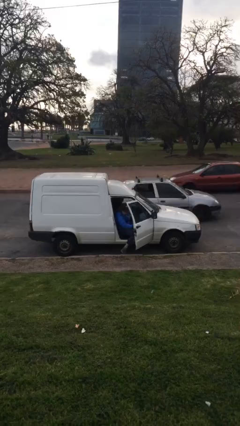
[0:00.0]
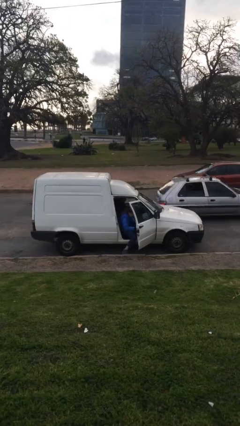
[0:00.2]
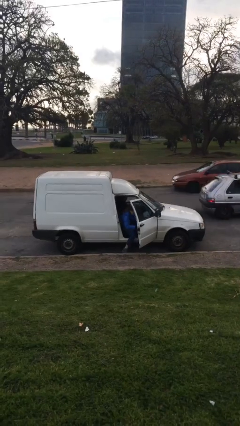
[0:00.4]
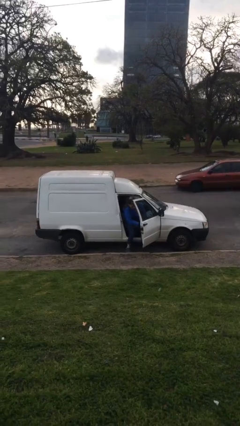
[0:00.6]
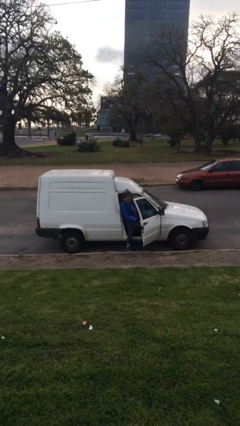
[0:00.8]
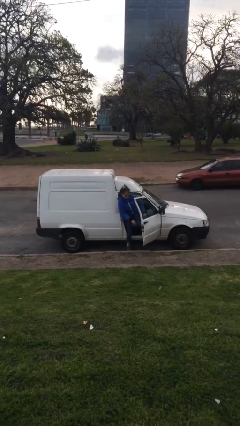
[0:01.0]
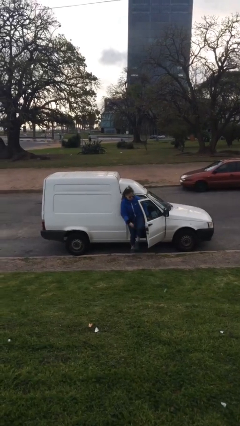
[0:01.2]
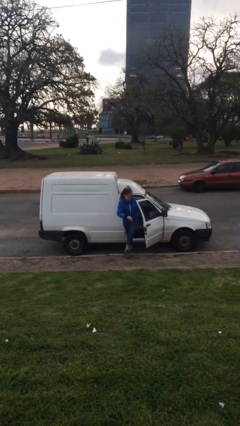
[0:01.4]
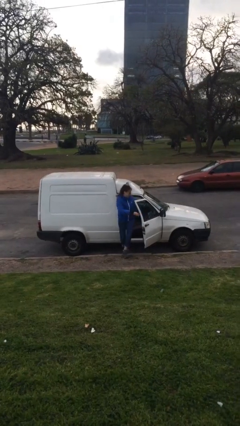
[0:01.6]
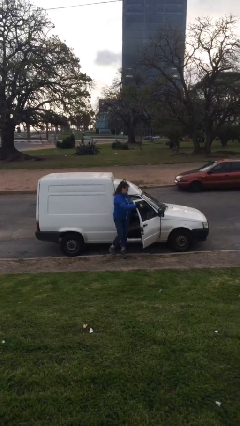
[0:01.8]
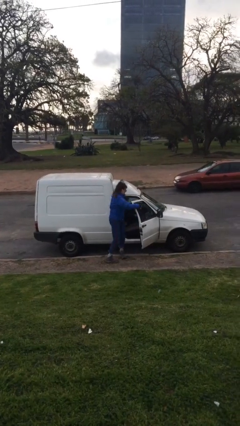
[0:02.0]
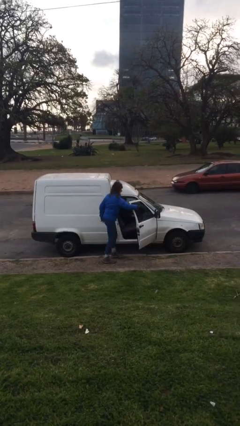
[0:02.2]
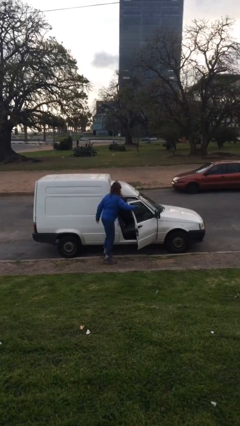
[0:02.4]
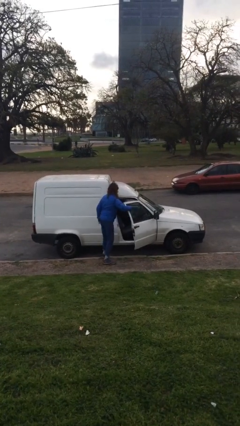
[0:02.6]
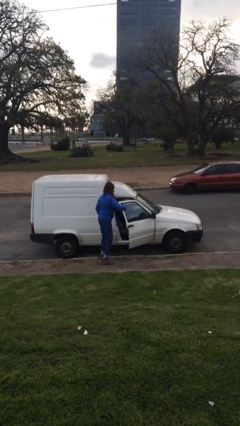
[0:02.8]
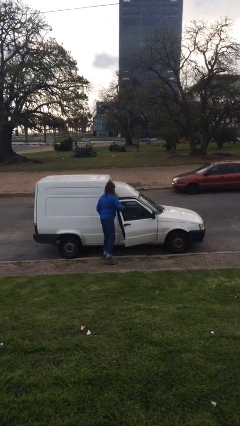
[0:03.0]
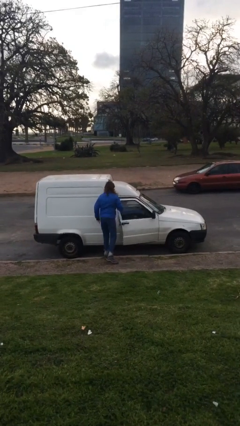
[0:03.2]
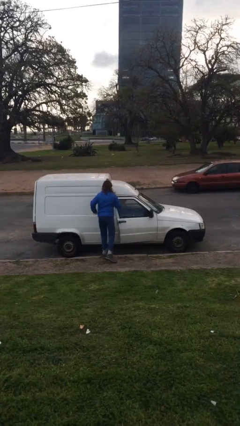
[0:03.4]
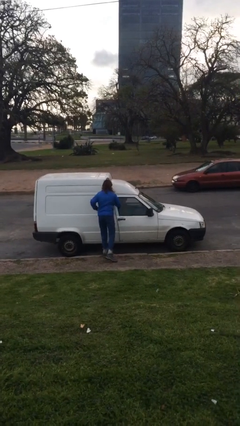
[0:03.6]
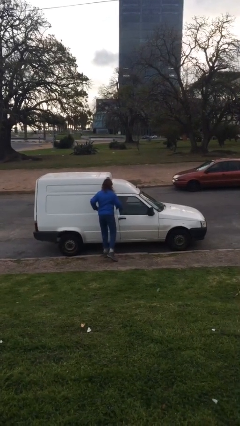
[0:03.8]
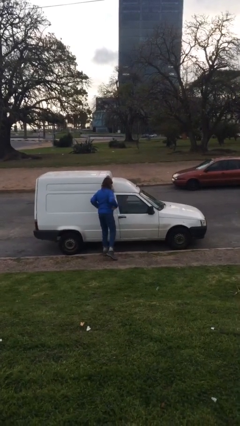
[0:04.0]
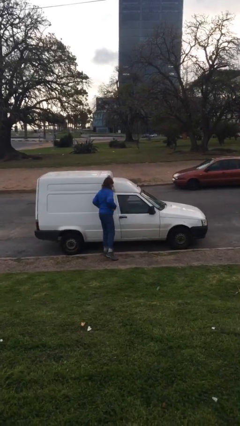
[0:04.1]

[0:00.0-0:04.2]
car drops off person

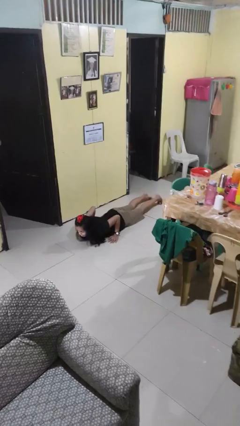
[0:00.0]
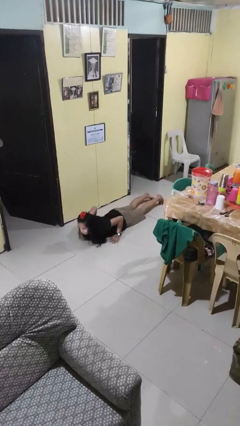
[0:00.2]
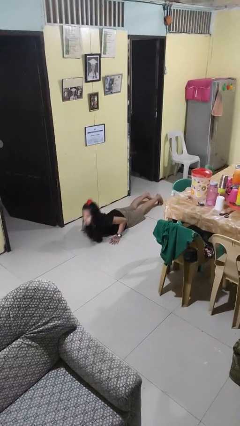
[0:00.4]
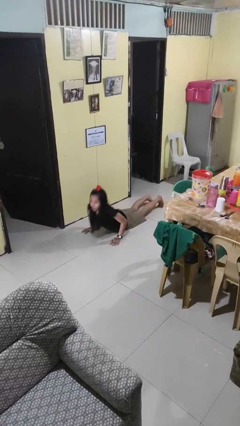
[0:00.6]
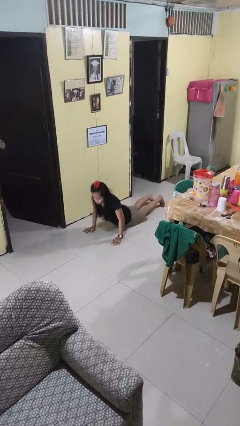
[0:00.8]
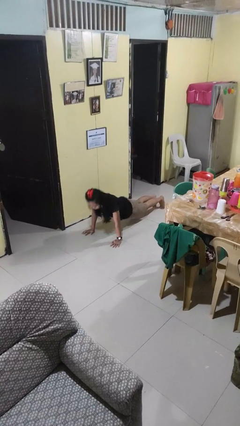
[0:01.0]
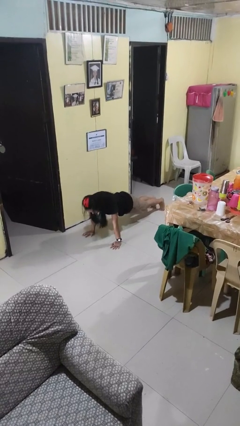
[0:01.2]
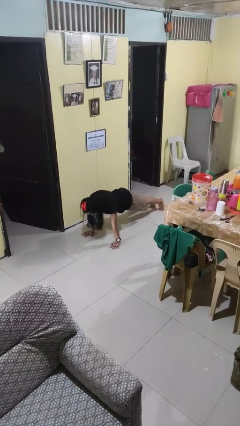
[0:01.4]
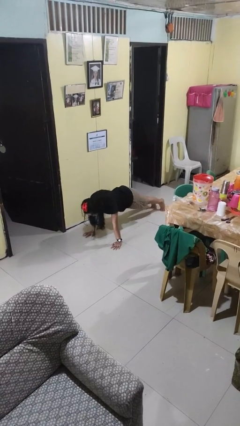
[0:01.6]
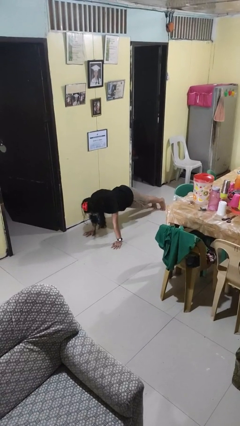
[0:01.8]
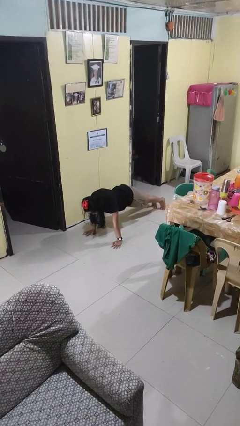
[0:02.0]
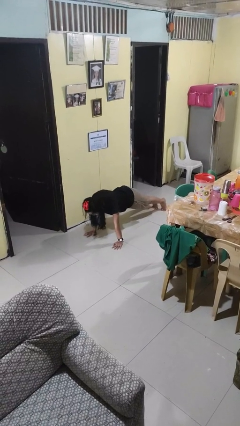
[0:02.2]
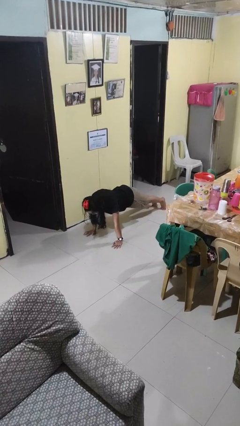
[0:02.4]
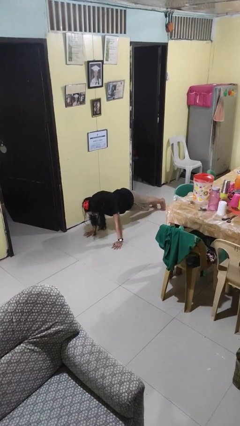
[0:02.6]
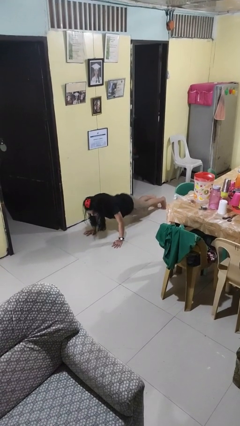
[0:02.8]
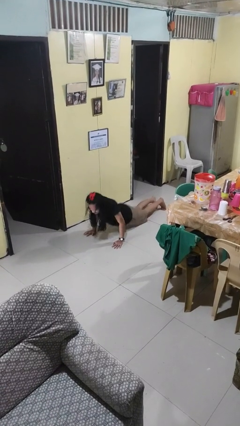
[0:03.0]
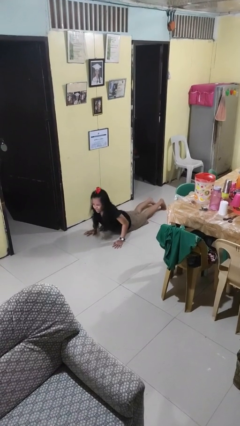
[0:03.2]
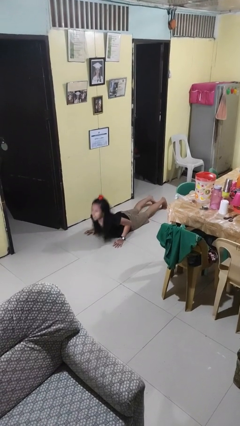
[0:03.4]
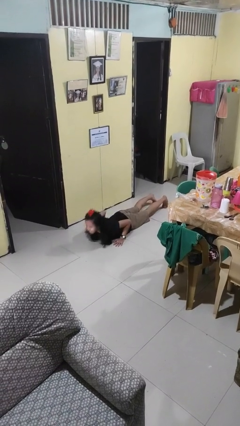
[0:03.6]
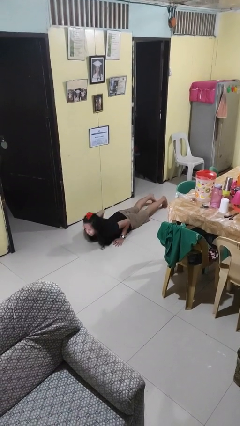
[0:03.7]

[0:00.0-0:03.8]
person exercises with pushup

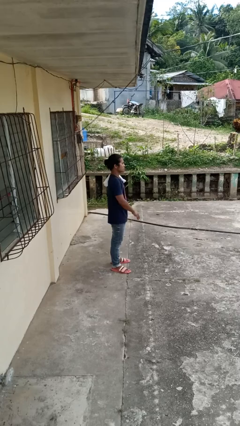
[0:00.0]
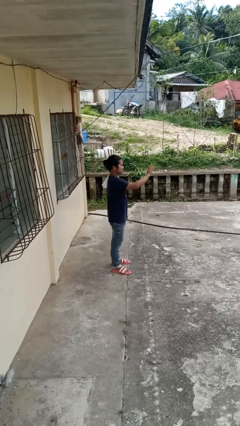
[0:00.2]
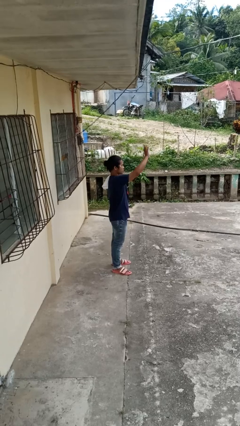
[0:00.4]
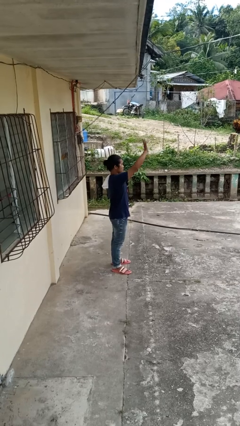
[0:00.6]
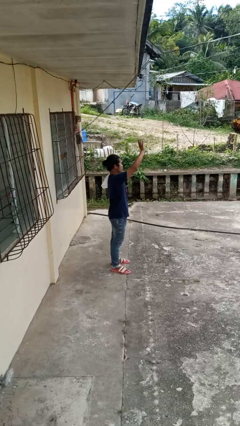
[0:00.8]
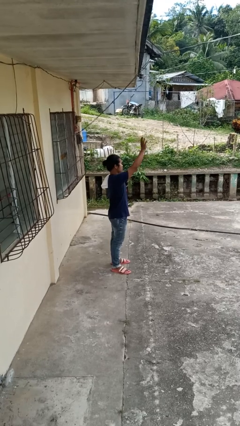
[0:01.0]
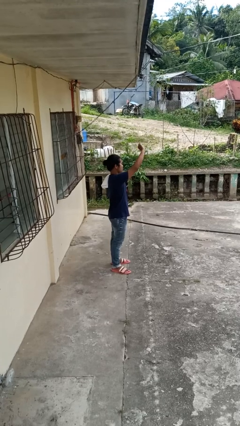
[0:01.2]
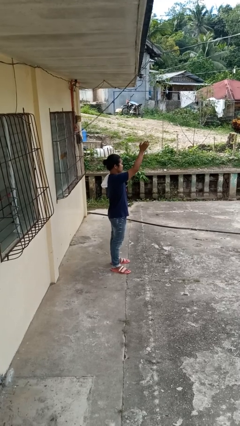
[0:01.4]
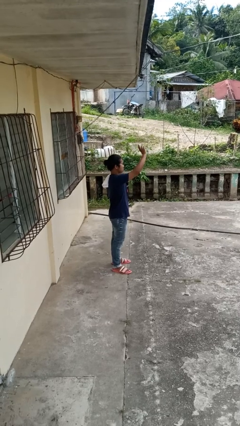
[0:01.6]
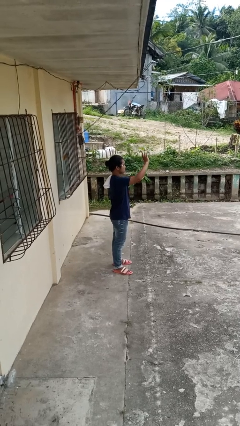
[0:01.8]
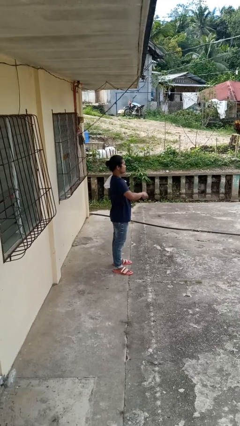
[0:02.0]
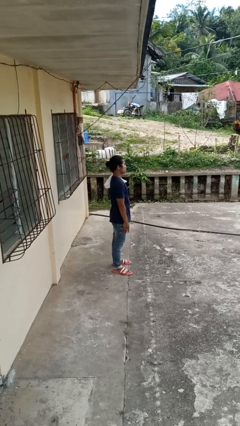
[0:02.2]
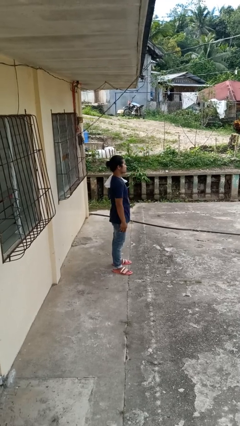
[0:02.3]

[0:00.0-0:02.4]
person waves at person

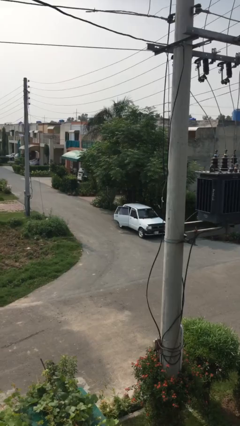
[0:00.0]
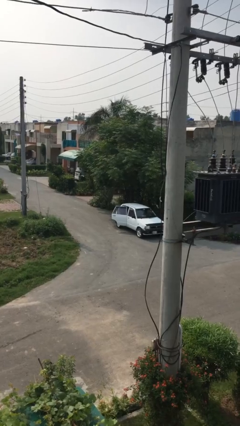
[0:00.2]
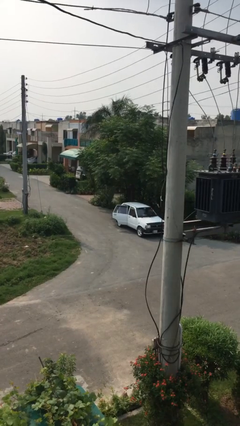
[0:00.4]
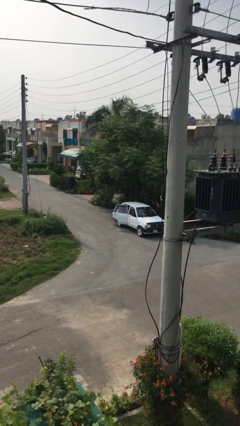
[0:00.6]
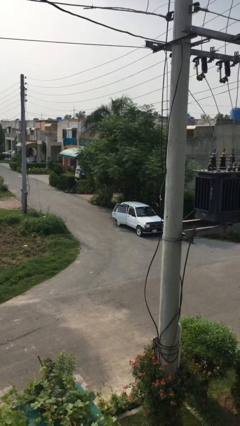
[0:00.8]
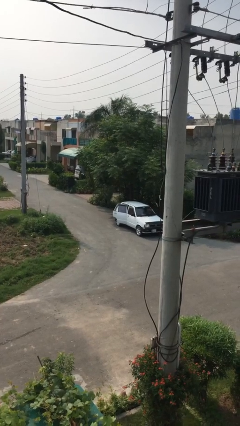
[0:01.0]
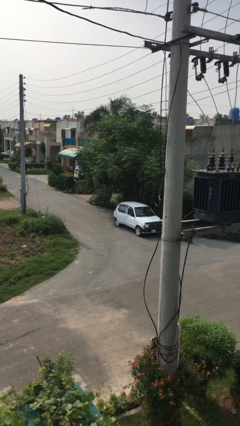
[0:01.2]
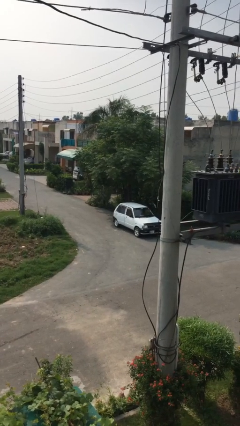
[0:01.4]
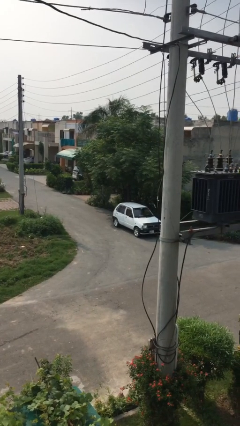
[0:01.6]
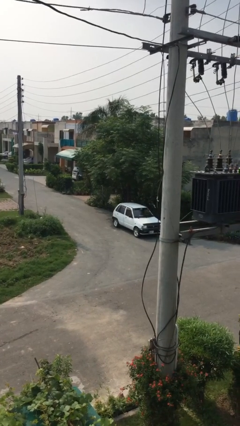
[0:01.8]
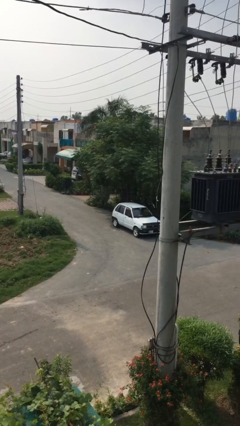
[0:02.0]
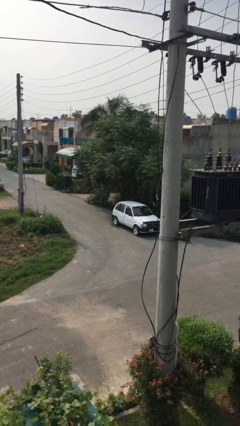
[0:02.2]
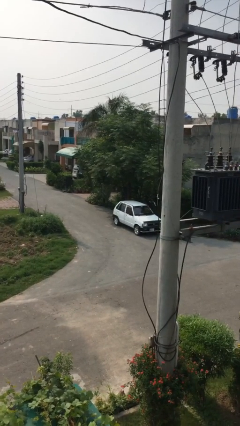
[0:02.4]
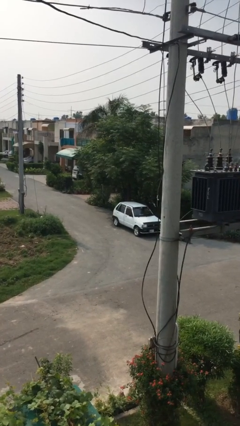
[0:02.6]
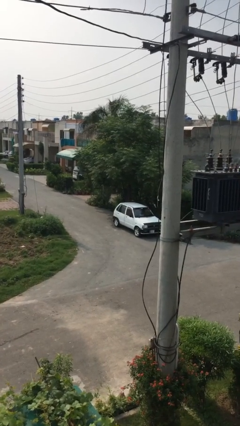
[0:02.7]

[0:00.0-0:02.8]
person closes car door

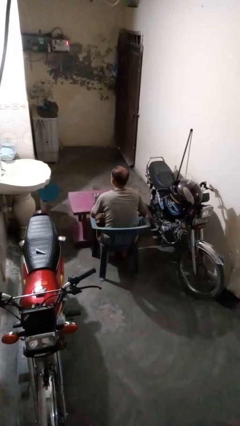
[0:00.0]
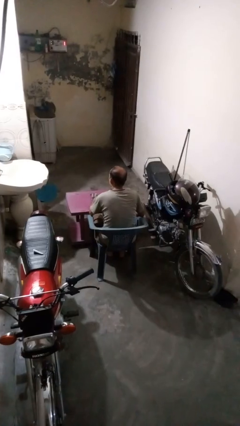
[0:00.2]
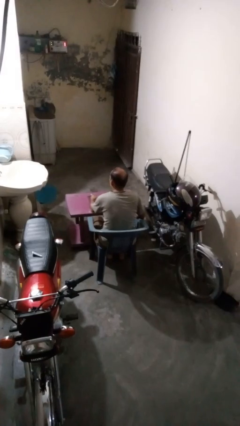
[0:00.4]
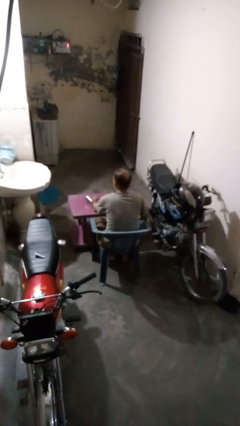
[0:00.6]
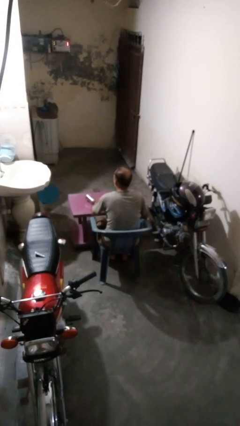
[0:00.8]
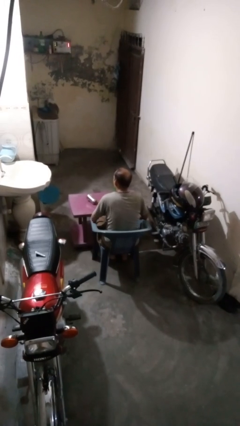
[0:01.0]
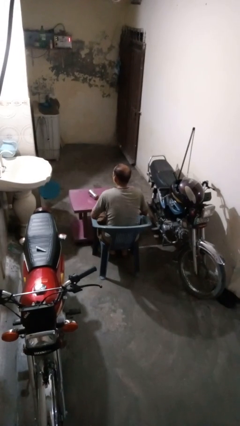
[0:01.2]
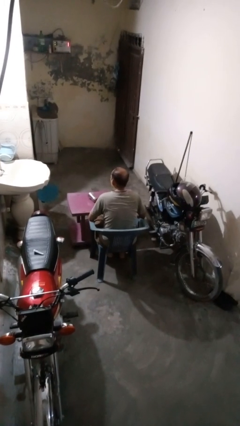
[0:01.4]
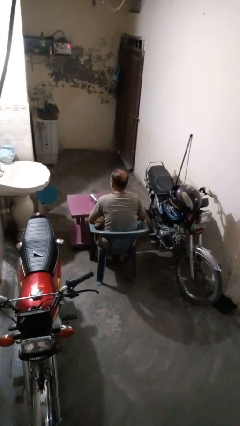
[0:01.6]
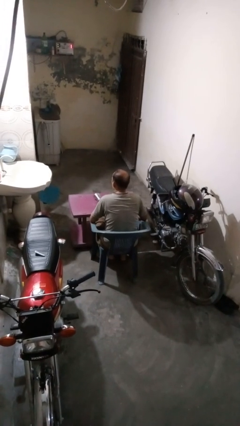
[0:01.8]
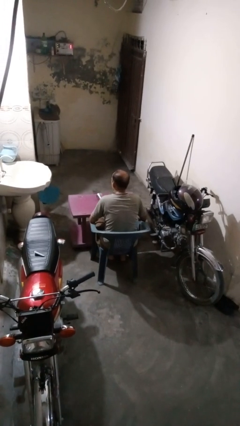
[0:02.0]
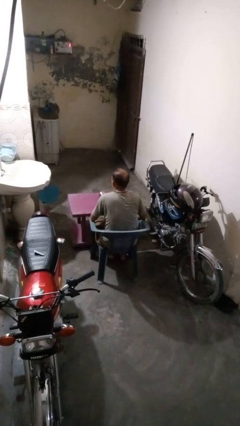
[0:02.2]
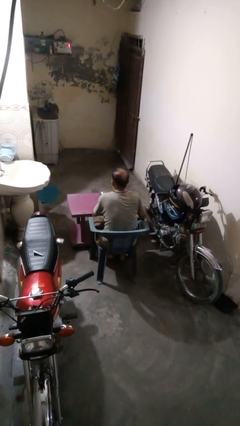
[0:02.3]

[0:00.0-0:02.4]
person knocks over glass

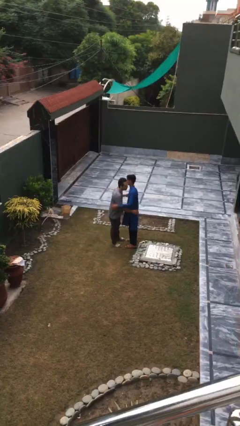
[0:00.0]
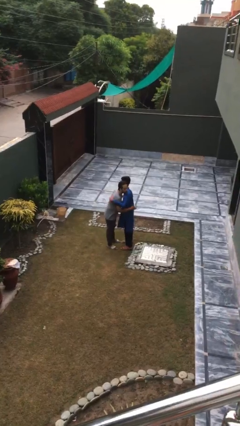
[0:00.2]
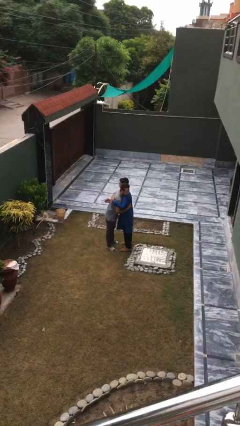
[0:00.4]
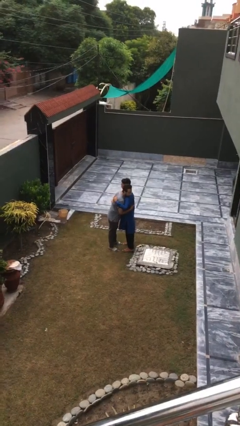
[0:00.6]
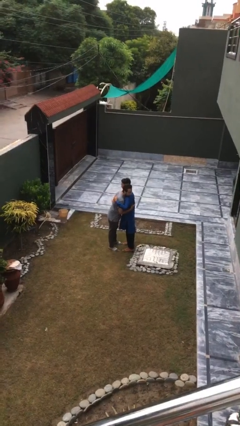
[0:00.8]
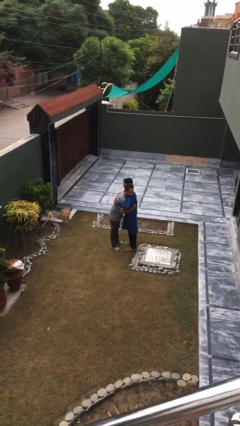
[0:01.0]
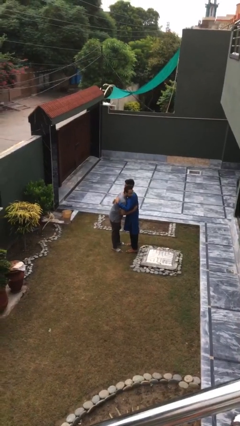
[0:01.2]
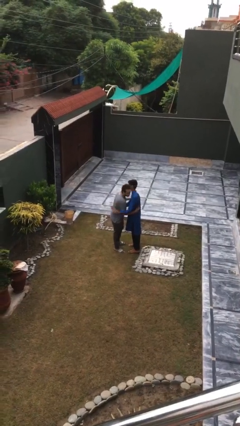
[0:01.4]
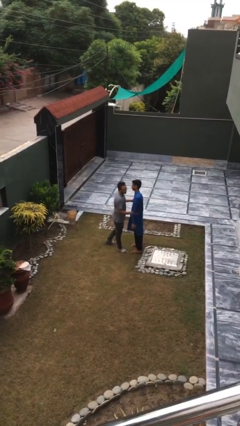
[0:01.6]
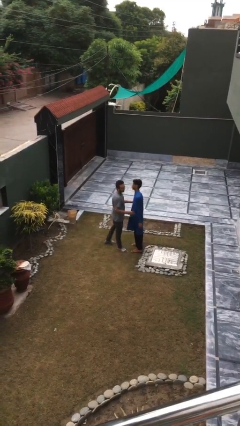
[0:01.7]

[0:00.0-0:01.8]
person embraces person
